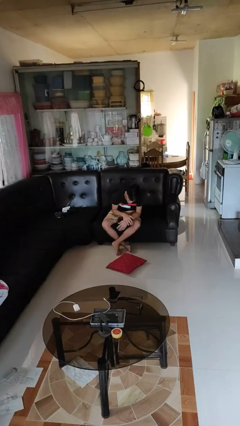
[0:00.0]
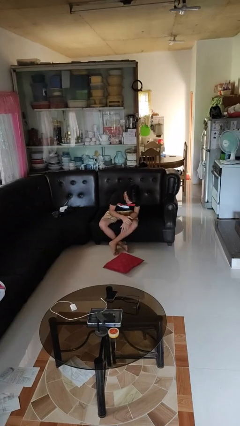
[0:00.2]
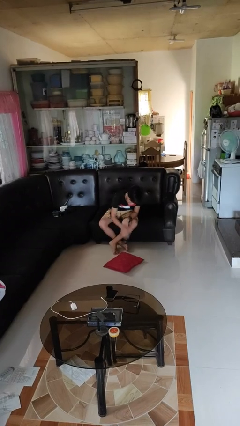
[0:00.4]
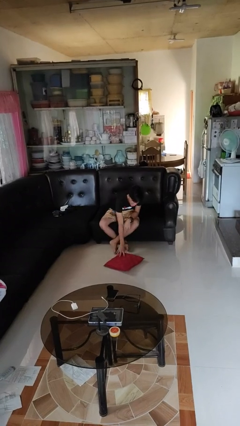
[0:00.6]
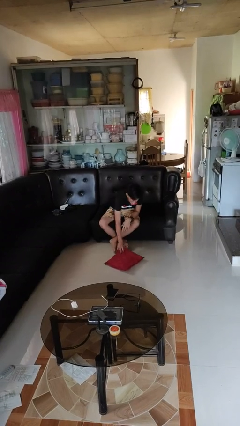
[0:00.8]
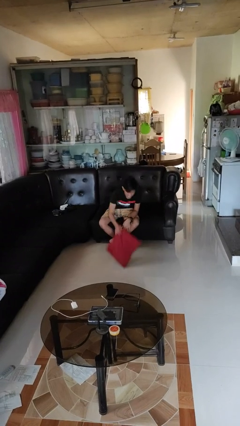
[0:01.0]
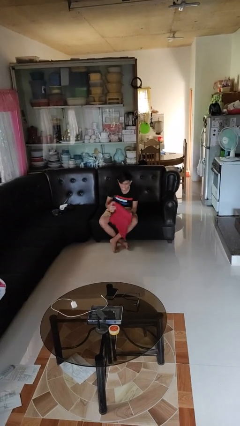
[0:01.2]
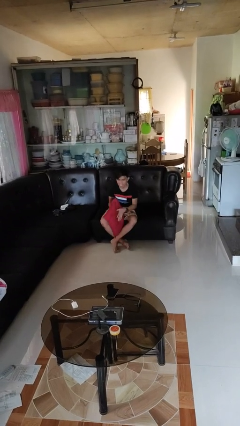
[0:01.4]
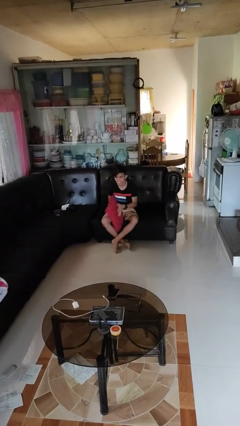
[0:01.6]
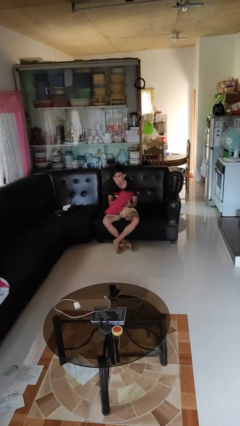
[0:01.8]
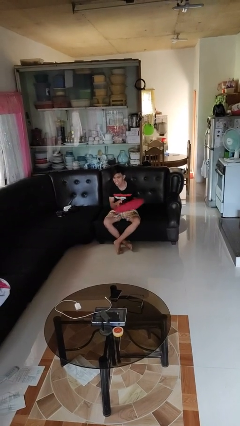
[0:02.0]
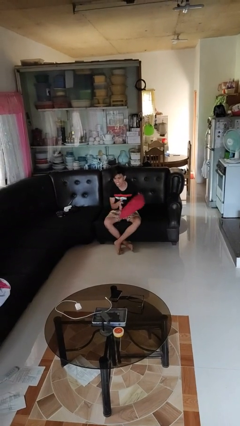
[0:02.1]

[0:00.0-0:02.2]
person picks up object from floor

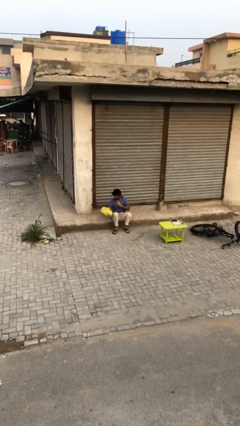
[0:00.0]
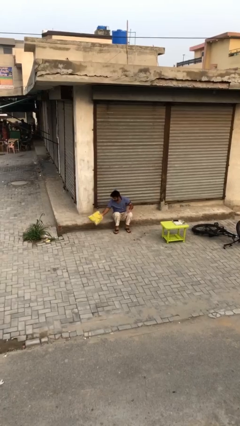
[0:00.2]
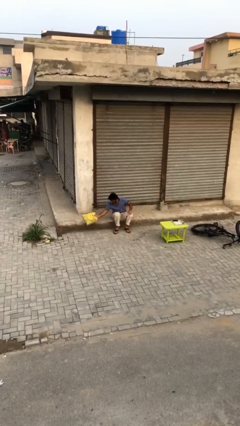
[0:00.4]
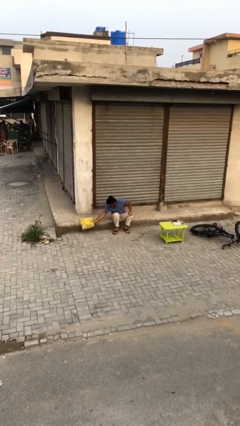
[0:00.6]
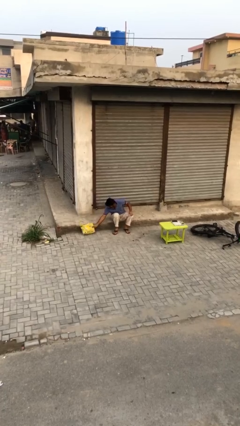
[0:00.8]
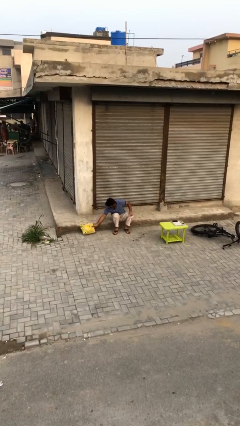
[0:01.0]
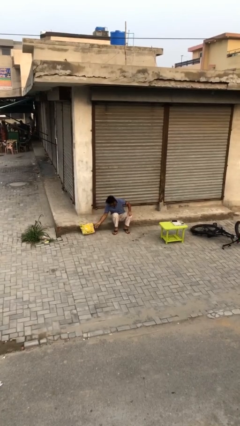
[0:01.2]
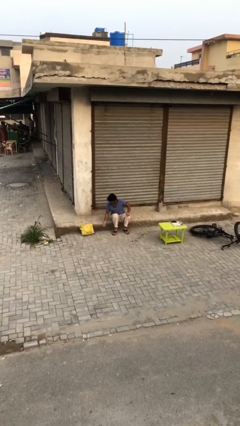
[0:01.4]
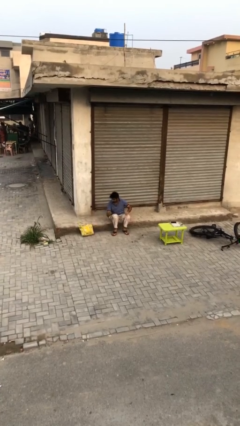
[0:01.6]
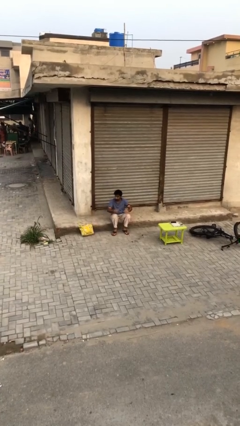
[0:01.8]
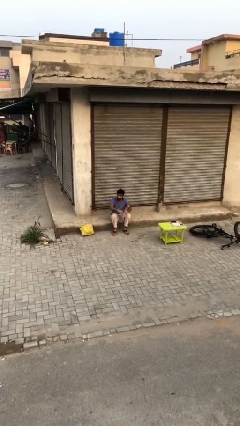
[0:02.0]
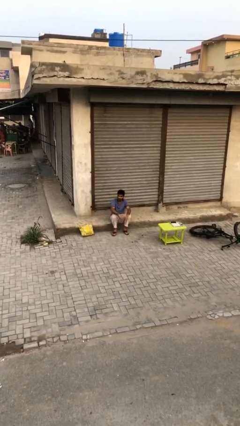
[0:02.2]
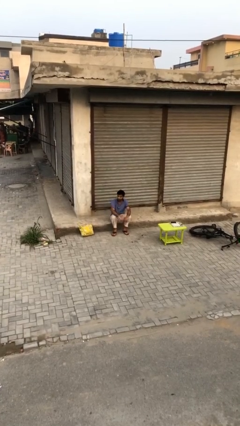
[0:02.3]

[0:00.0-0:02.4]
person puts down object on floor

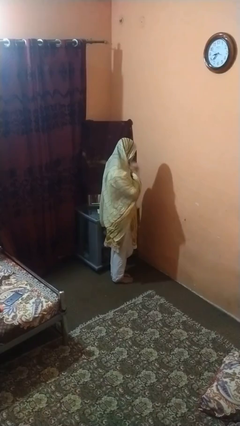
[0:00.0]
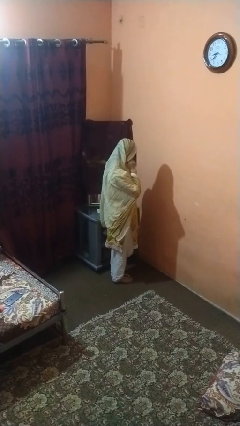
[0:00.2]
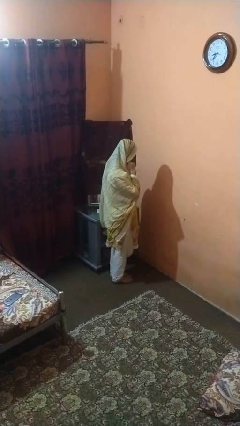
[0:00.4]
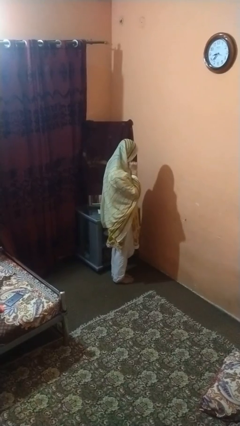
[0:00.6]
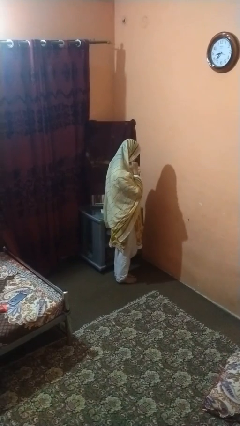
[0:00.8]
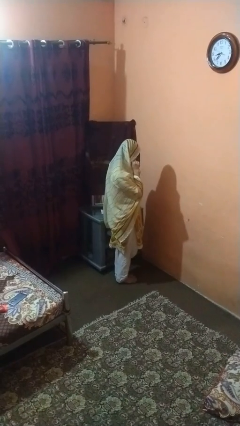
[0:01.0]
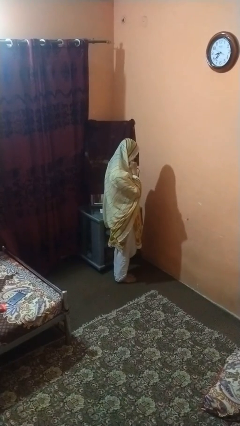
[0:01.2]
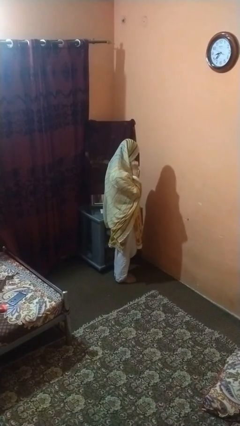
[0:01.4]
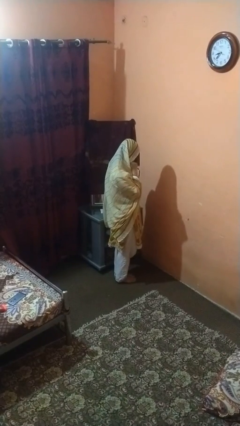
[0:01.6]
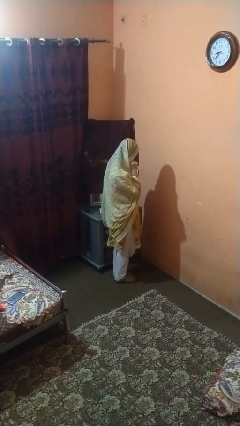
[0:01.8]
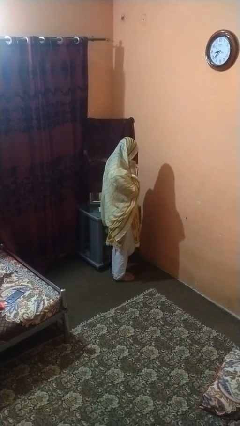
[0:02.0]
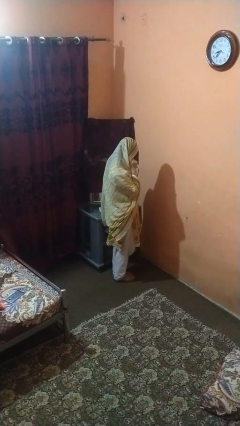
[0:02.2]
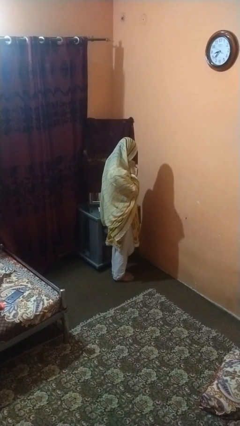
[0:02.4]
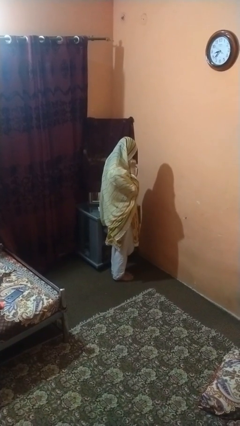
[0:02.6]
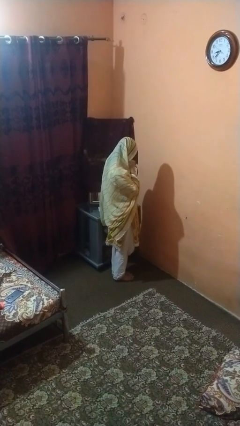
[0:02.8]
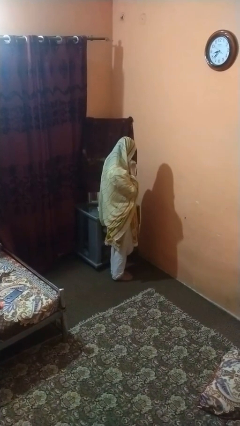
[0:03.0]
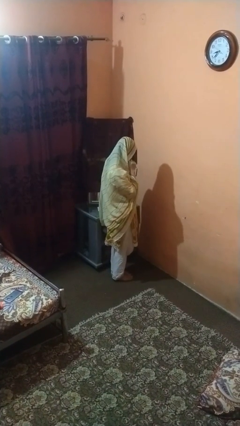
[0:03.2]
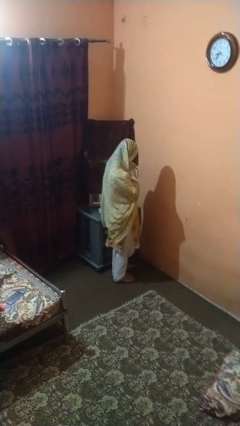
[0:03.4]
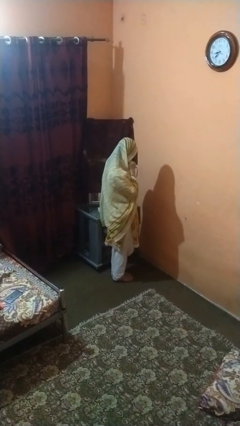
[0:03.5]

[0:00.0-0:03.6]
person touches earlobe

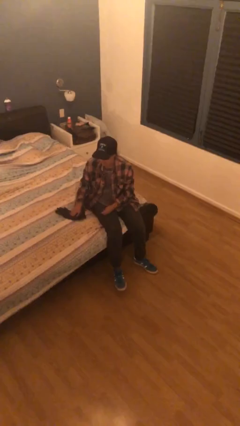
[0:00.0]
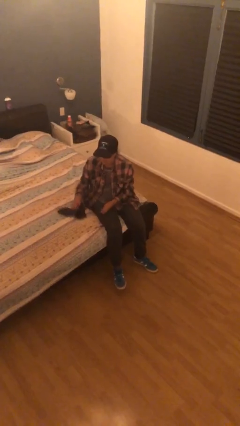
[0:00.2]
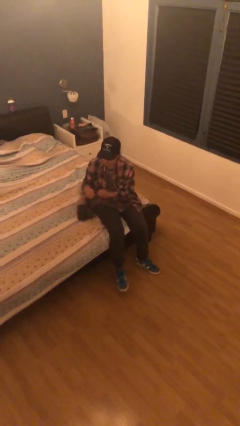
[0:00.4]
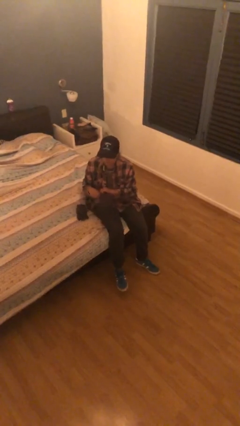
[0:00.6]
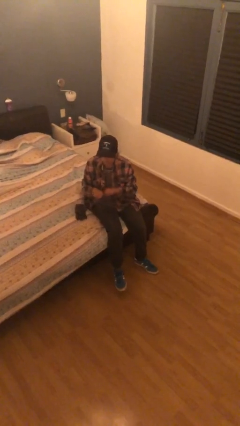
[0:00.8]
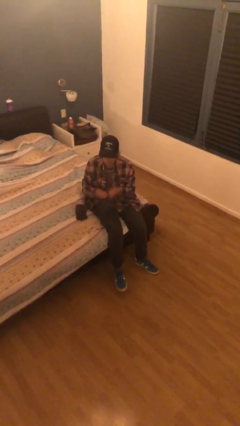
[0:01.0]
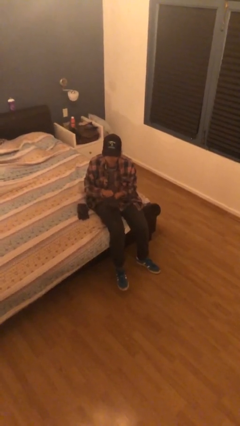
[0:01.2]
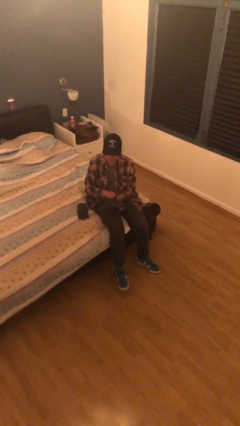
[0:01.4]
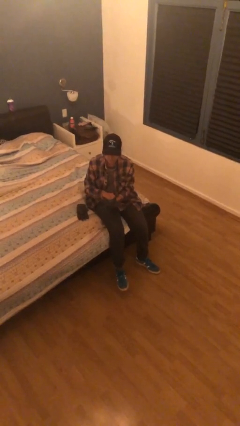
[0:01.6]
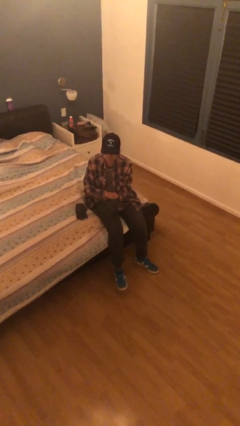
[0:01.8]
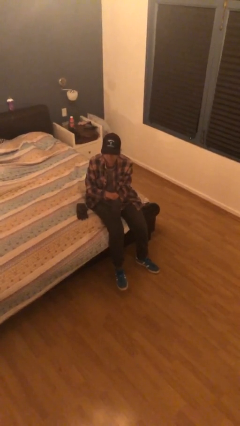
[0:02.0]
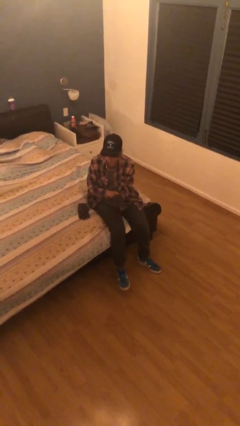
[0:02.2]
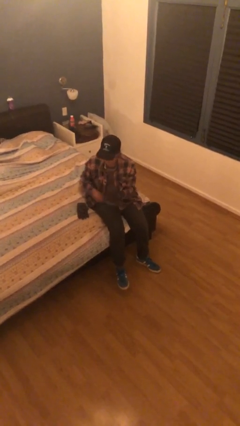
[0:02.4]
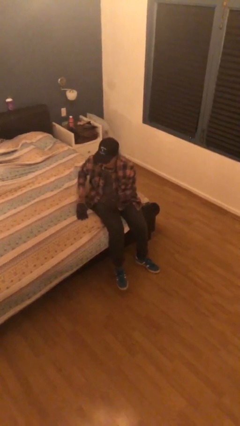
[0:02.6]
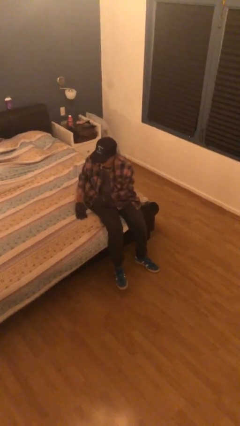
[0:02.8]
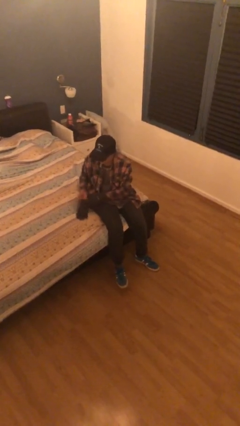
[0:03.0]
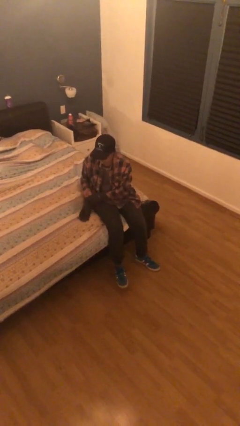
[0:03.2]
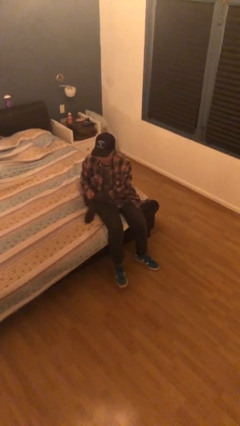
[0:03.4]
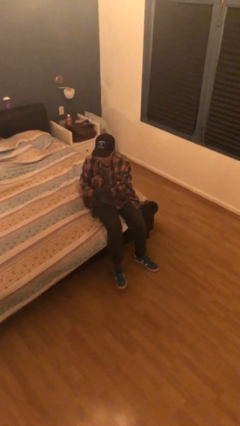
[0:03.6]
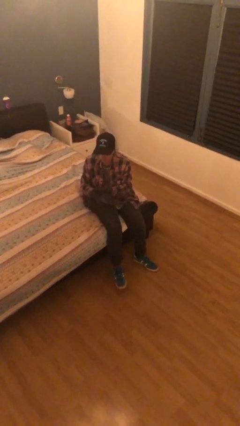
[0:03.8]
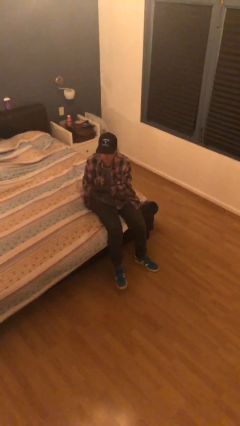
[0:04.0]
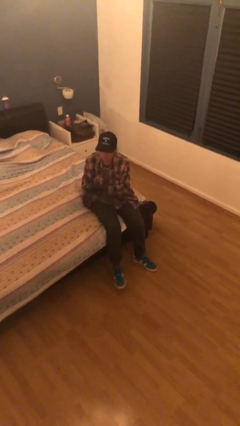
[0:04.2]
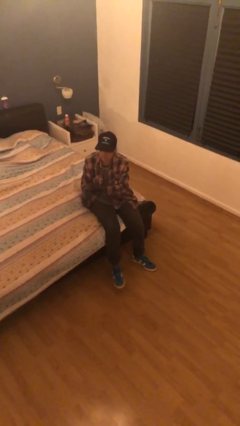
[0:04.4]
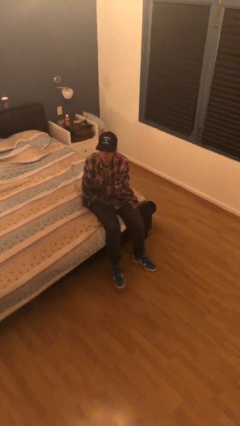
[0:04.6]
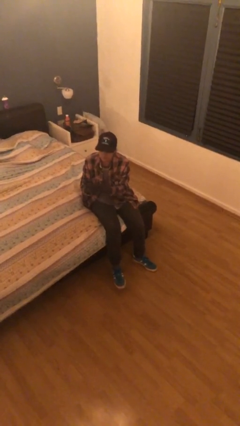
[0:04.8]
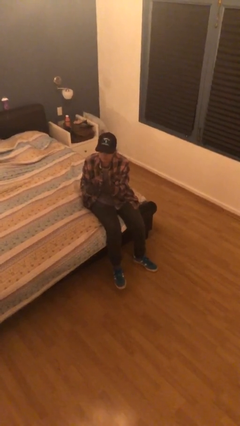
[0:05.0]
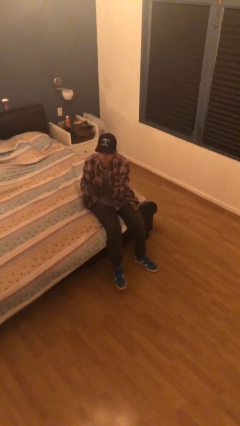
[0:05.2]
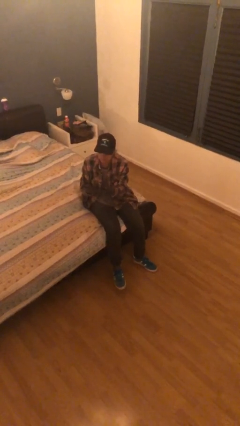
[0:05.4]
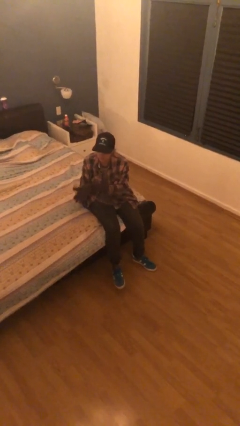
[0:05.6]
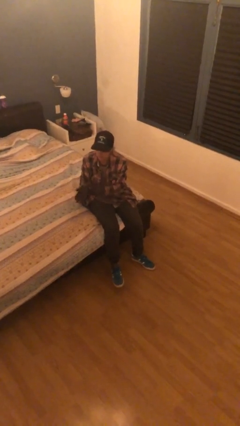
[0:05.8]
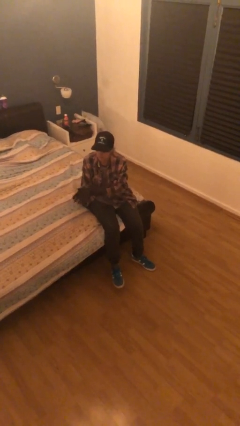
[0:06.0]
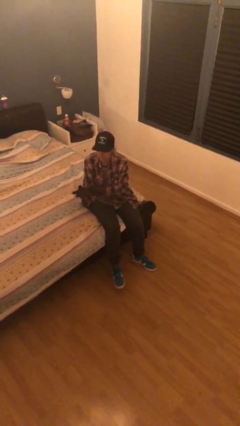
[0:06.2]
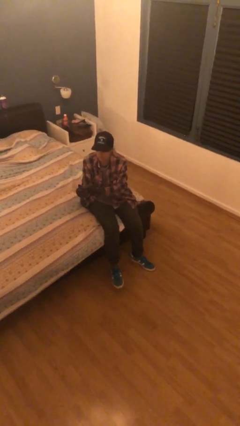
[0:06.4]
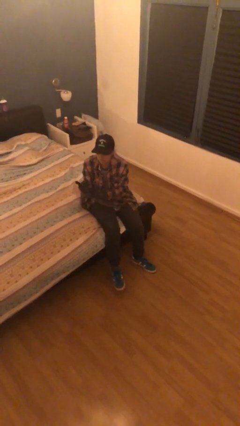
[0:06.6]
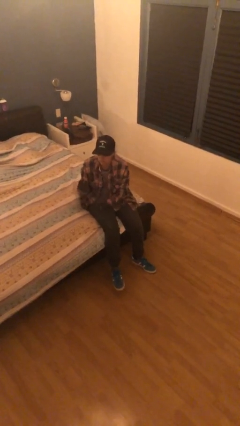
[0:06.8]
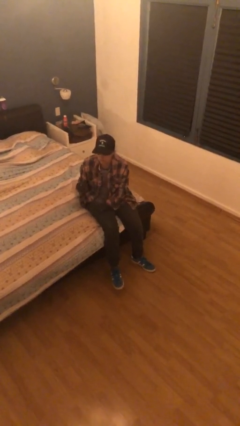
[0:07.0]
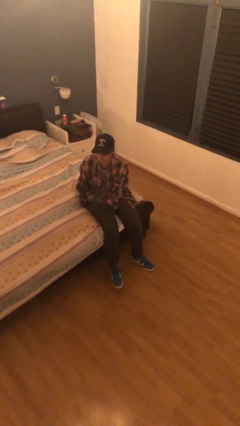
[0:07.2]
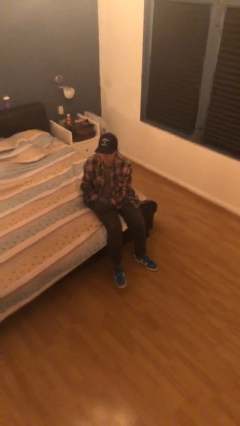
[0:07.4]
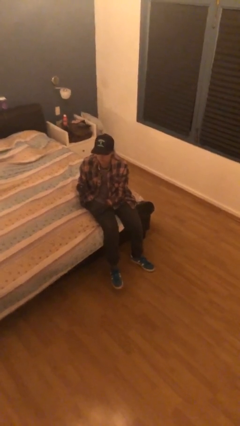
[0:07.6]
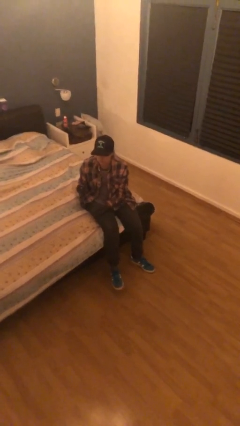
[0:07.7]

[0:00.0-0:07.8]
person puts on gloves

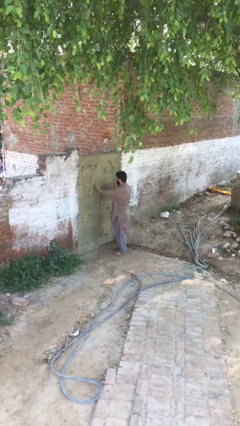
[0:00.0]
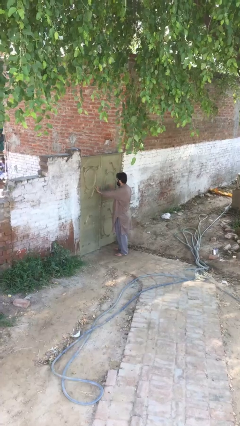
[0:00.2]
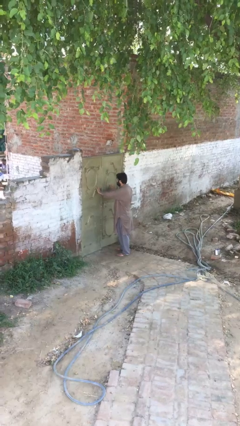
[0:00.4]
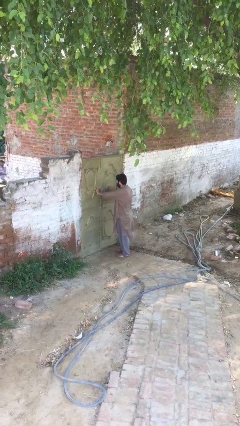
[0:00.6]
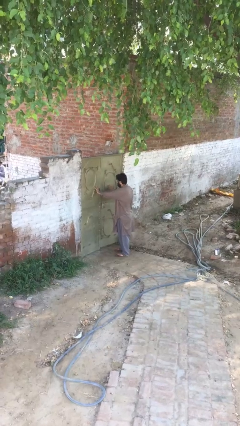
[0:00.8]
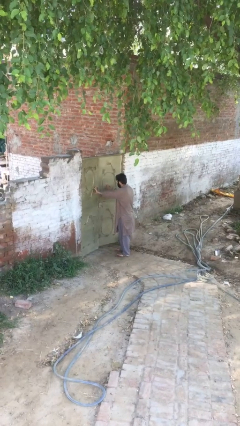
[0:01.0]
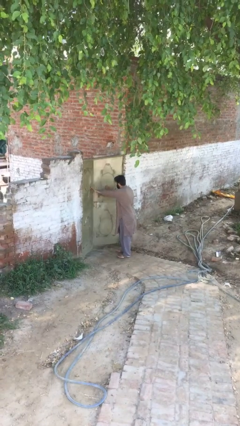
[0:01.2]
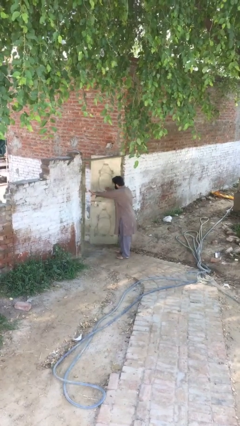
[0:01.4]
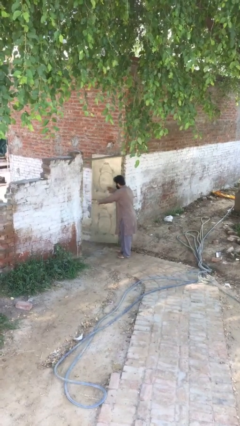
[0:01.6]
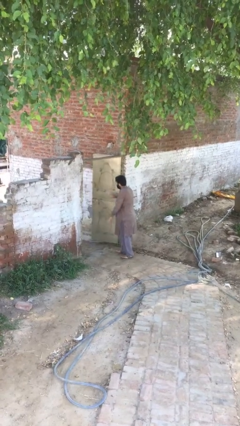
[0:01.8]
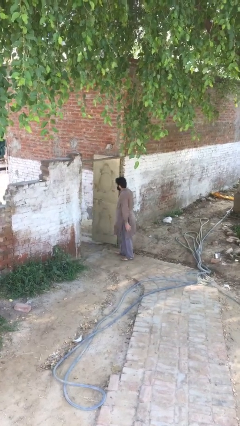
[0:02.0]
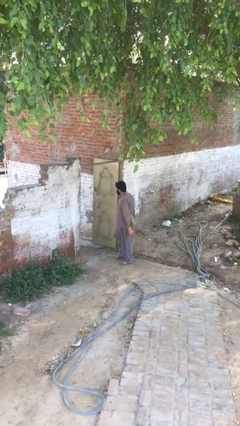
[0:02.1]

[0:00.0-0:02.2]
person opens facility door
